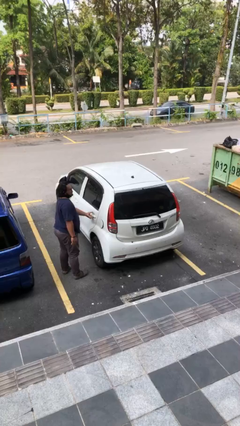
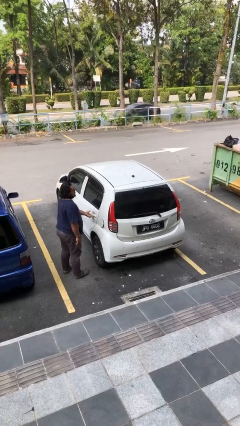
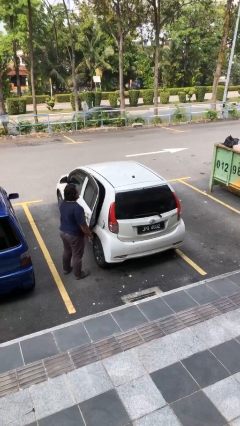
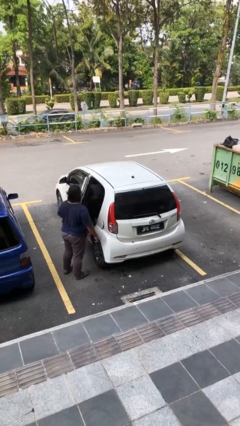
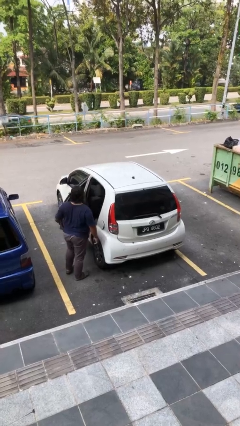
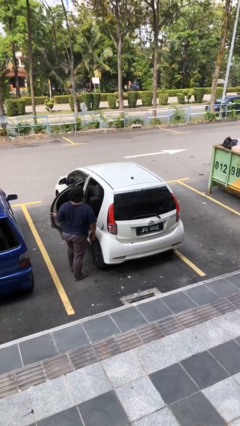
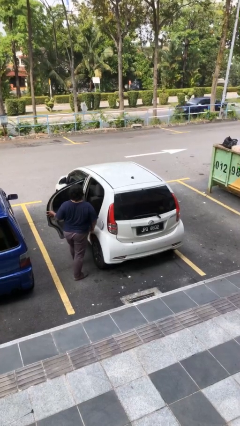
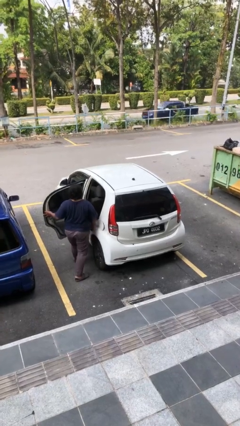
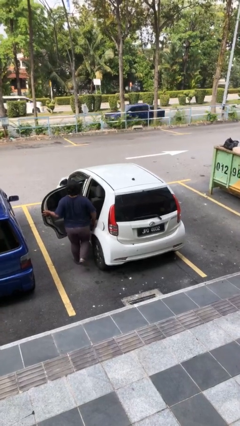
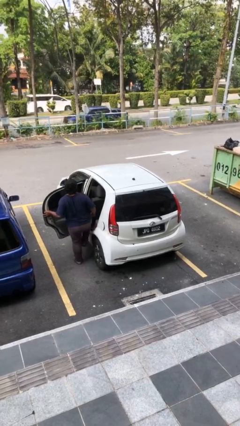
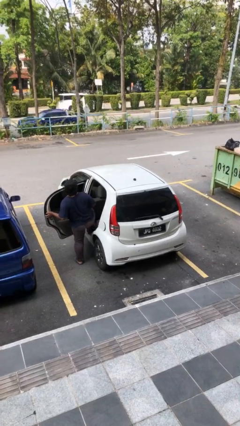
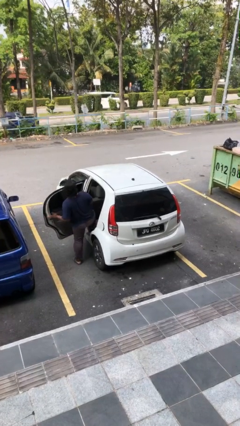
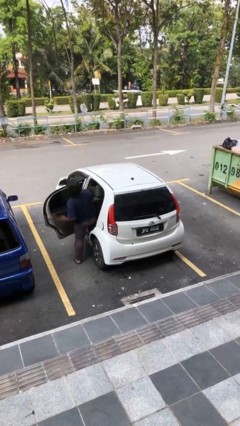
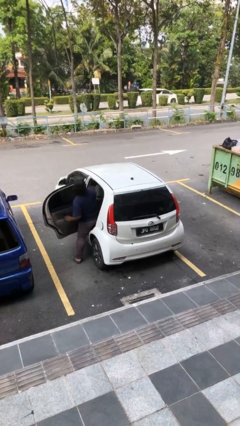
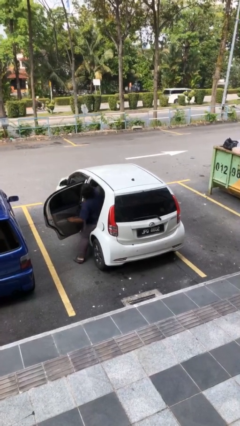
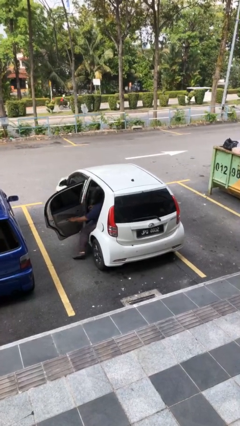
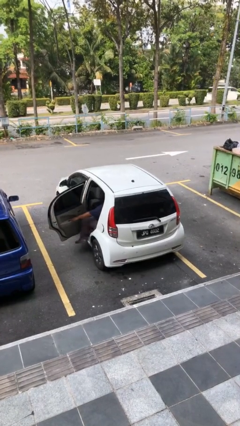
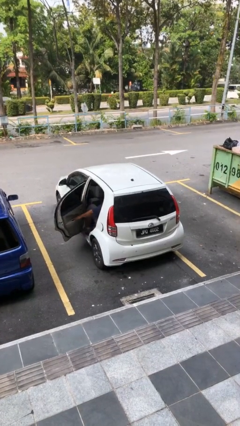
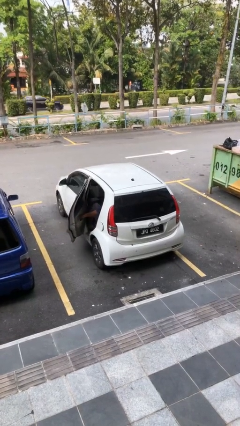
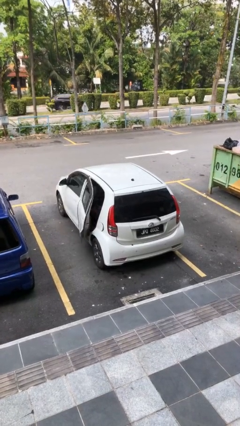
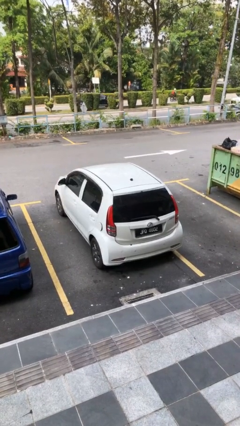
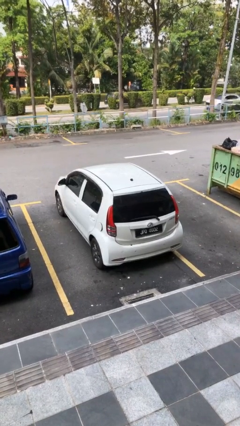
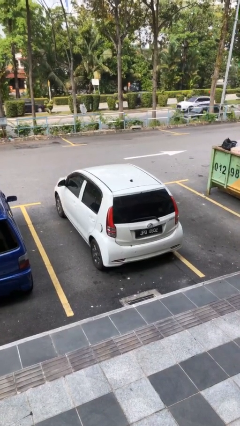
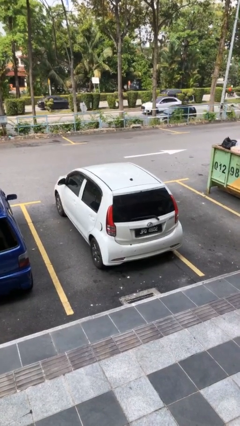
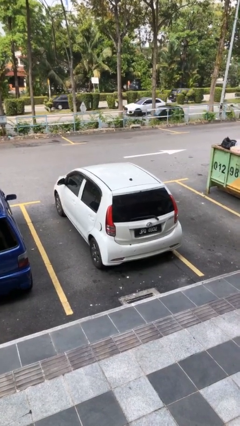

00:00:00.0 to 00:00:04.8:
car picks up person

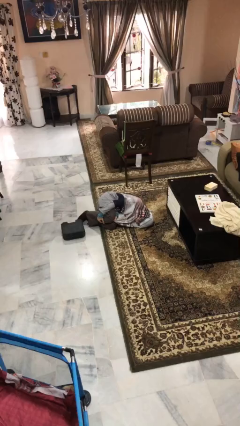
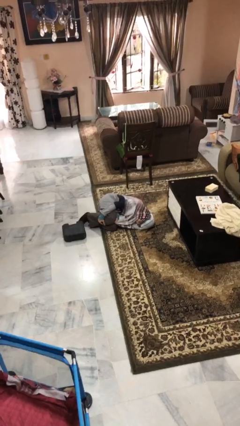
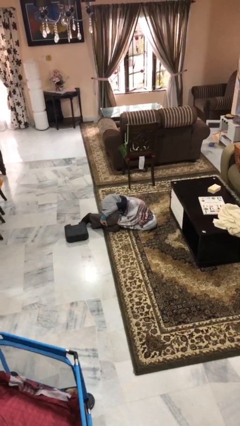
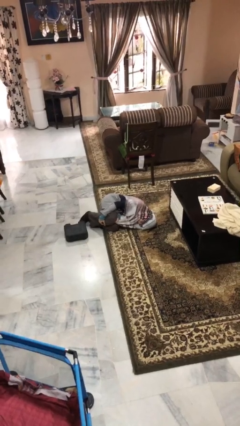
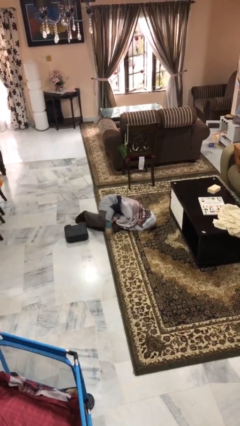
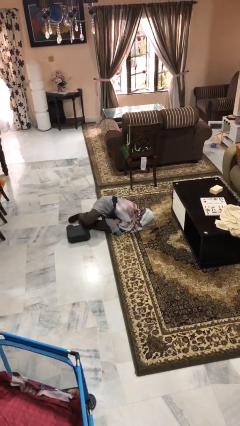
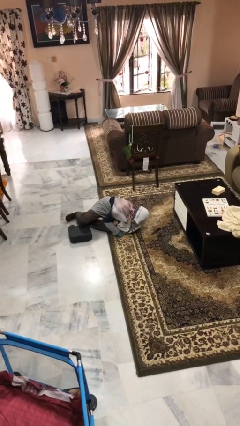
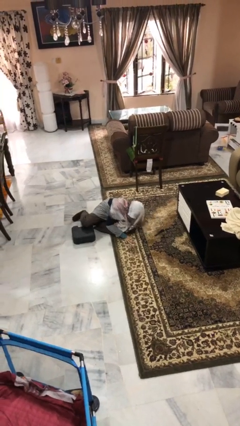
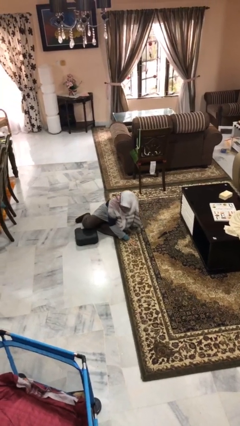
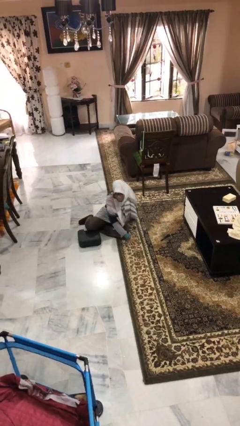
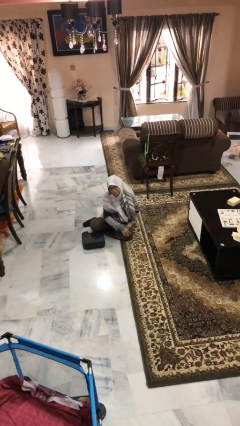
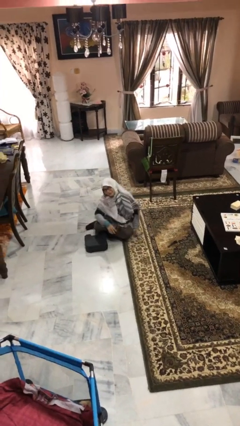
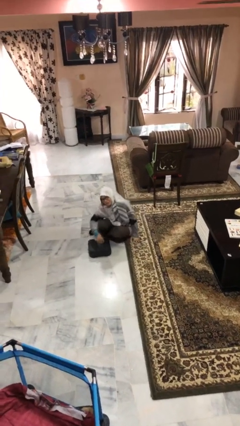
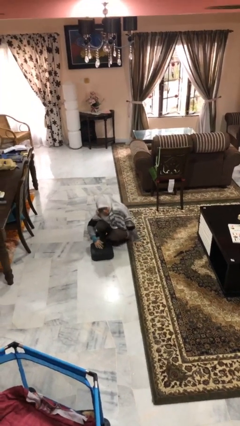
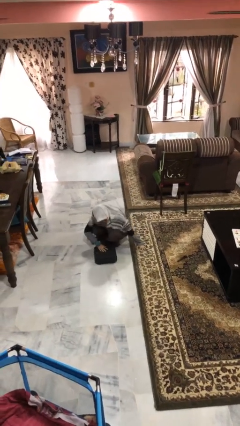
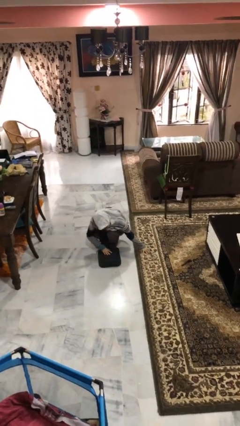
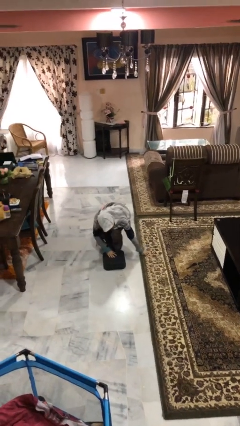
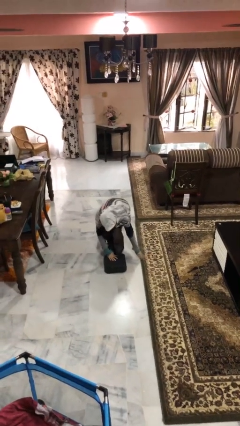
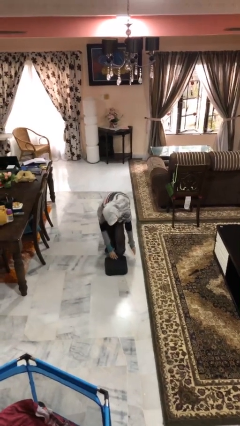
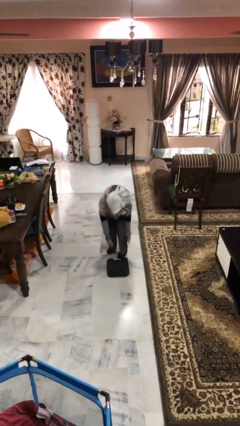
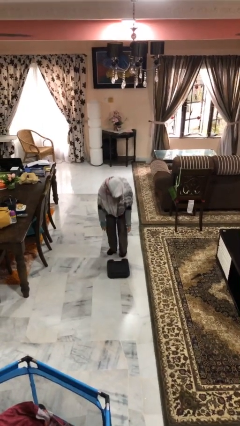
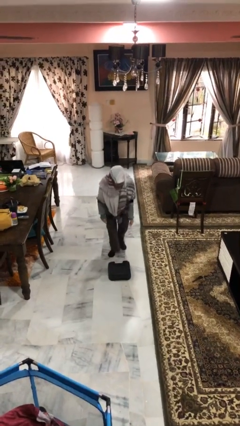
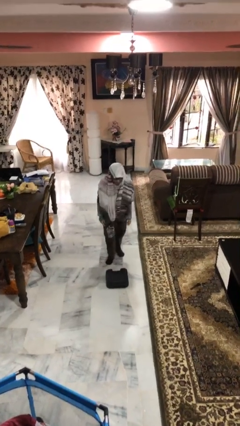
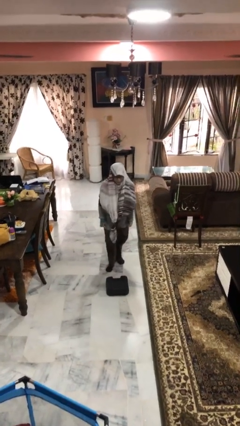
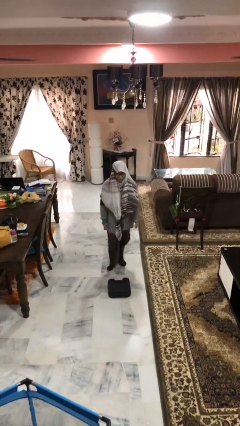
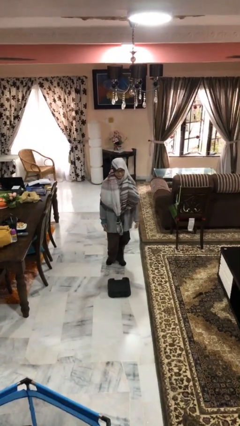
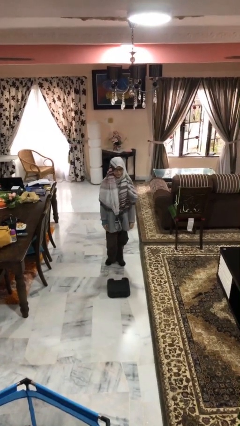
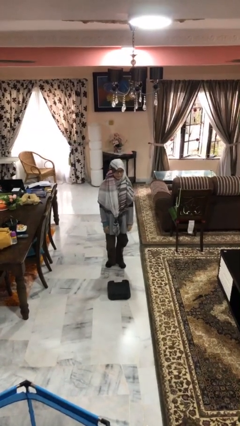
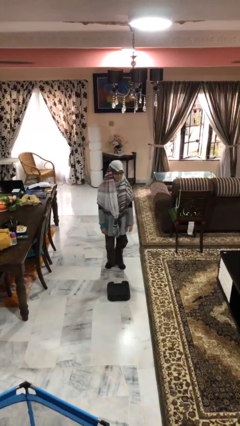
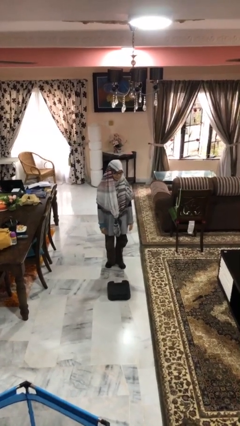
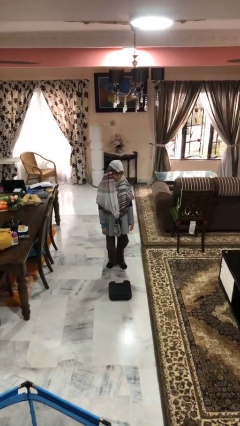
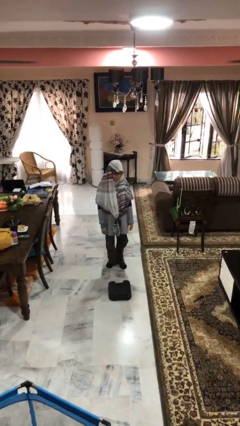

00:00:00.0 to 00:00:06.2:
person stands up from floor

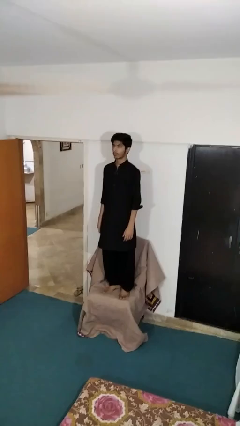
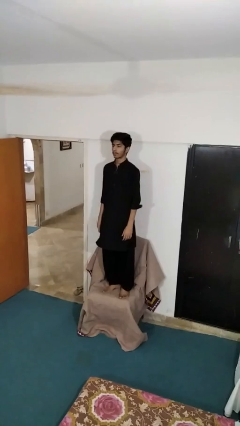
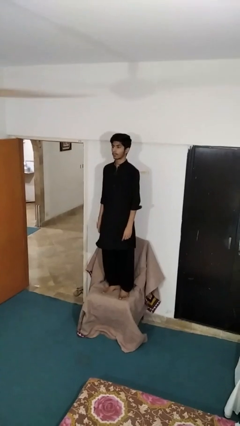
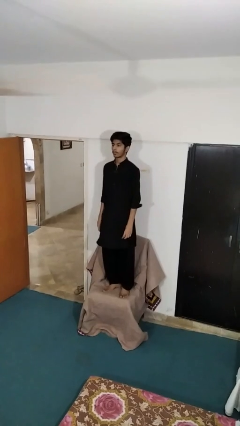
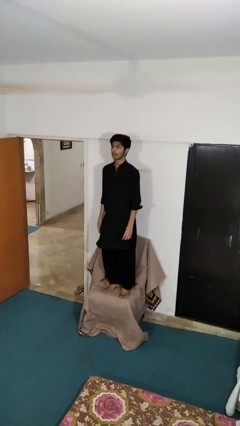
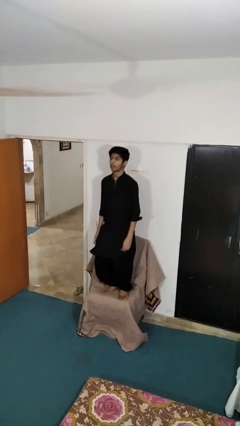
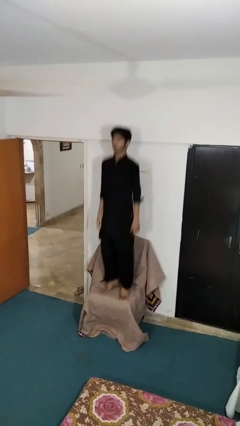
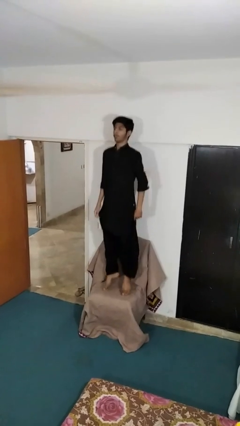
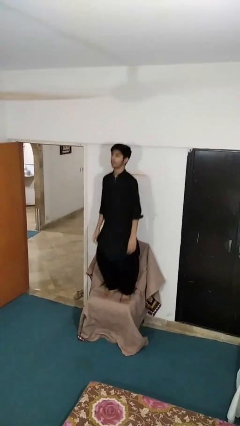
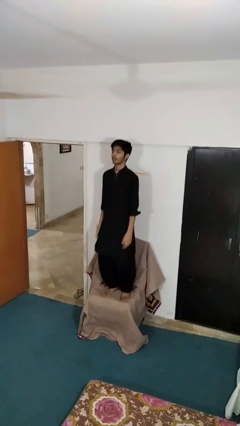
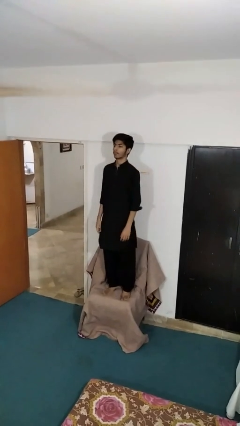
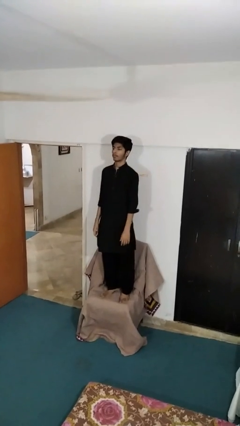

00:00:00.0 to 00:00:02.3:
person jumps on couch

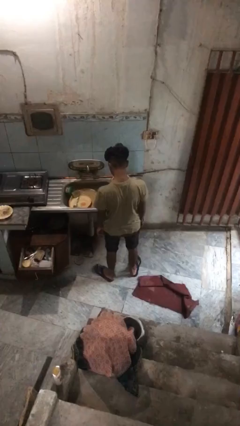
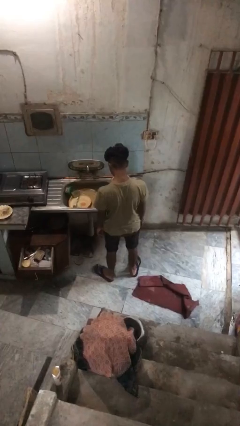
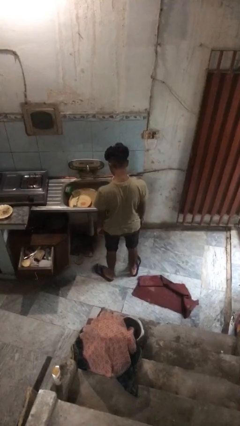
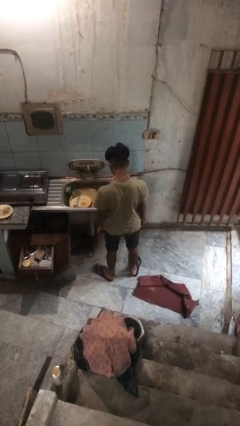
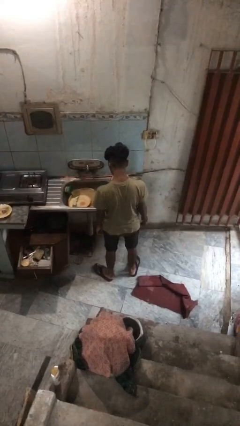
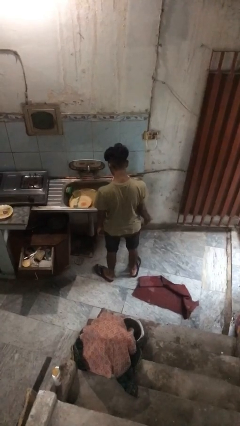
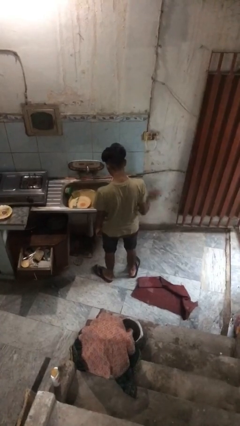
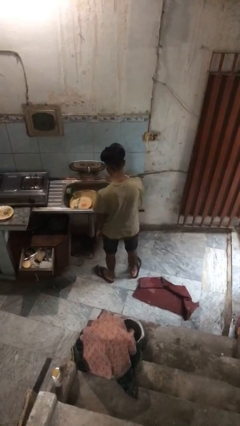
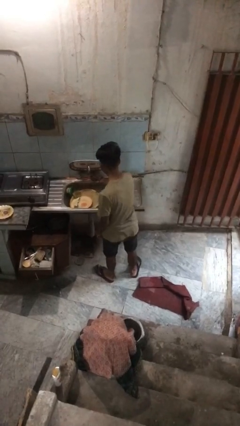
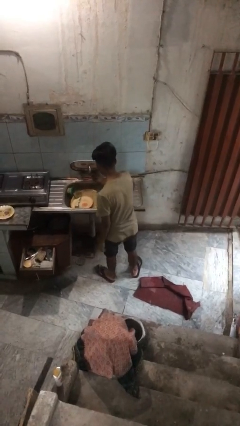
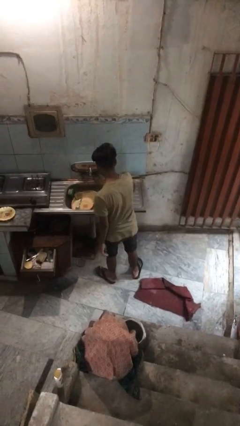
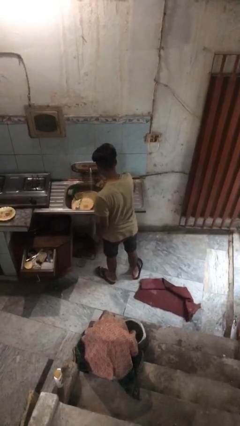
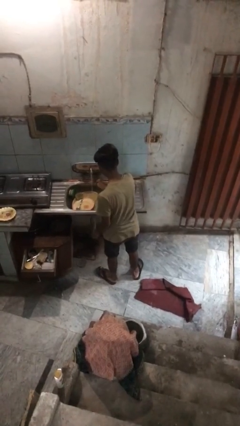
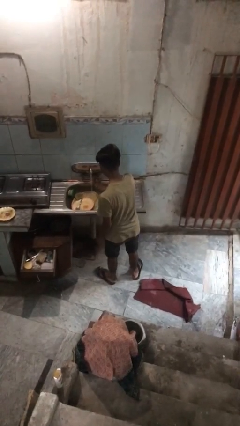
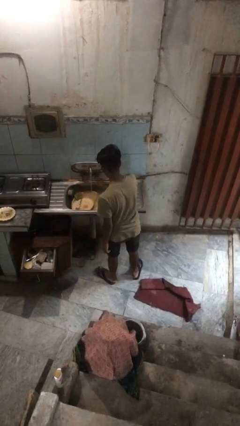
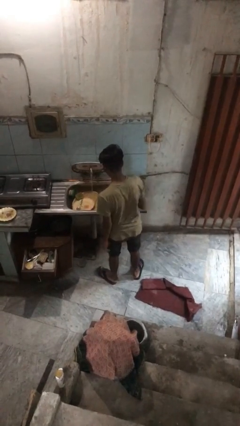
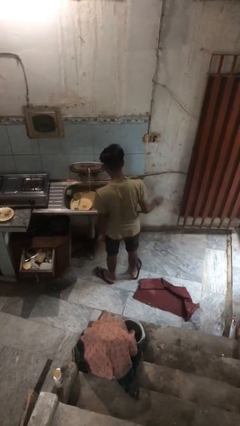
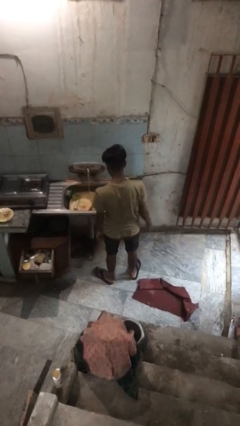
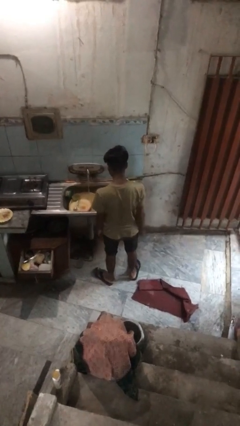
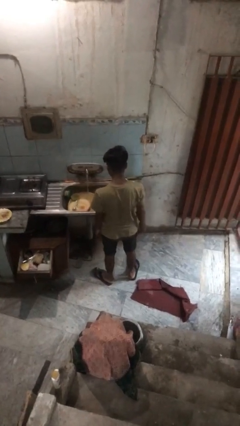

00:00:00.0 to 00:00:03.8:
person turns on faucet

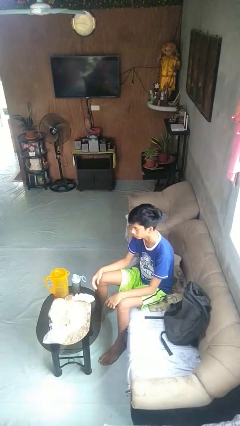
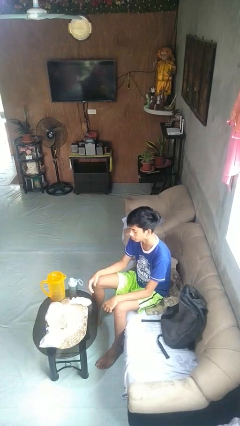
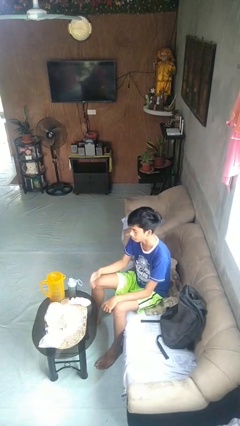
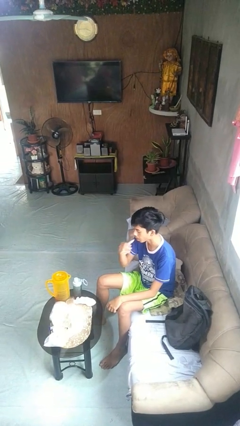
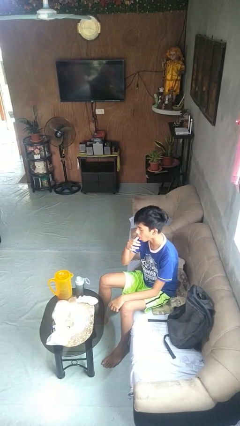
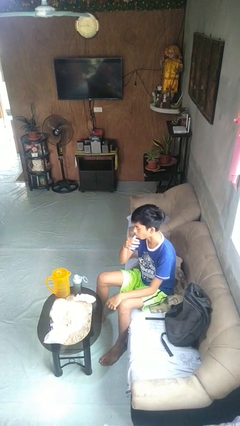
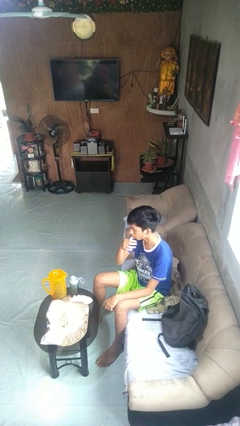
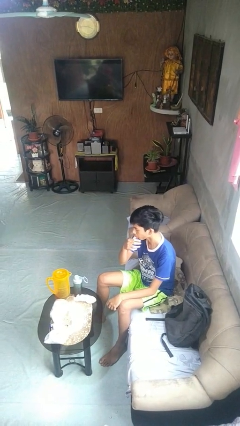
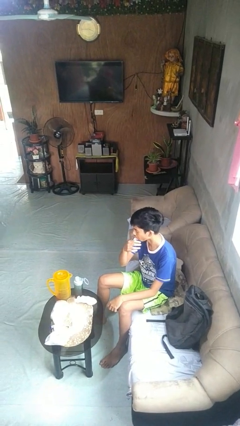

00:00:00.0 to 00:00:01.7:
person licks fingers
